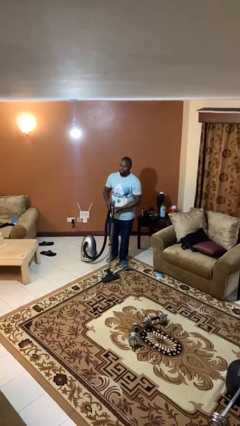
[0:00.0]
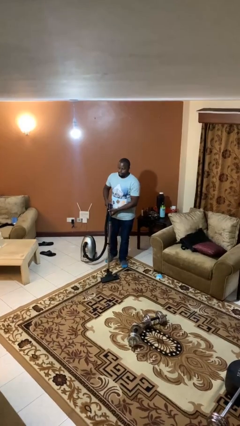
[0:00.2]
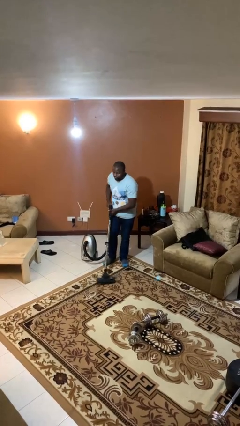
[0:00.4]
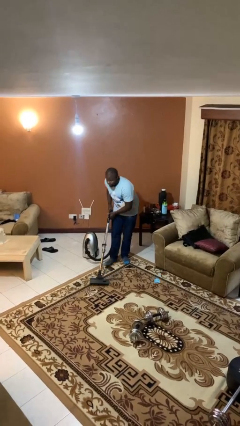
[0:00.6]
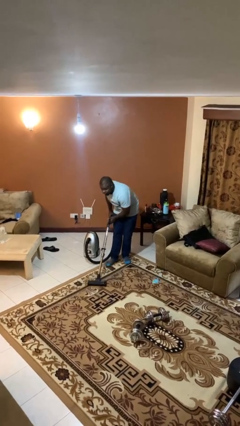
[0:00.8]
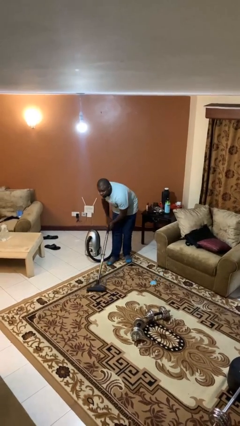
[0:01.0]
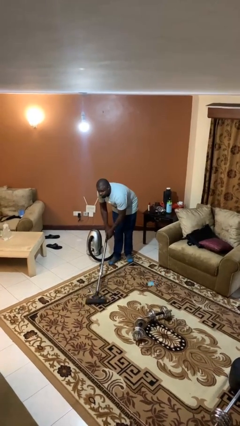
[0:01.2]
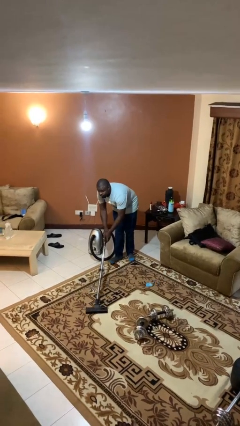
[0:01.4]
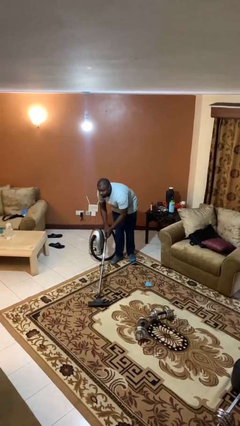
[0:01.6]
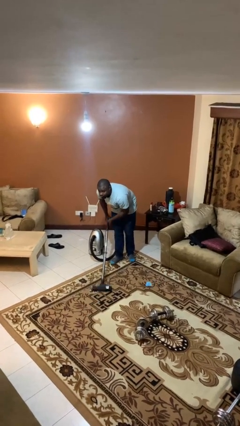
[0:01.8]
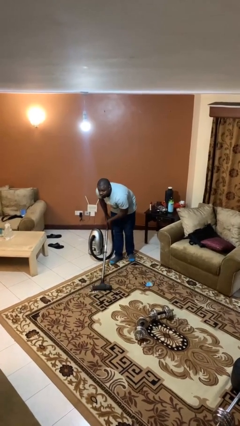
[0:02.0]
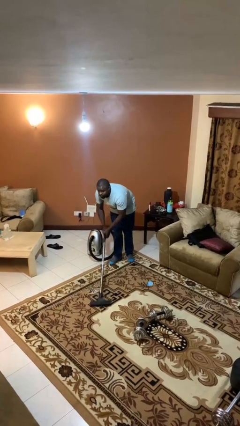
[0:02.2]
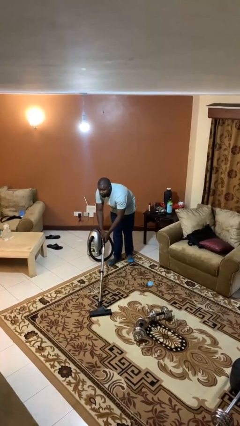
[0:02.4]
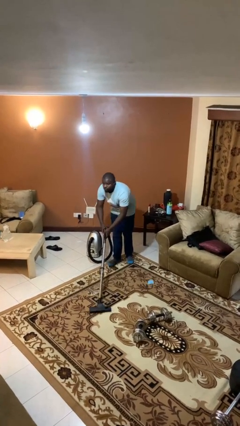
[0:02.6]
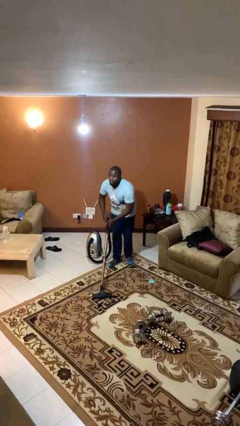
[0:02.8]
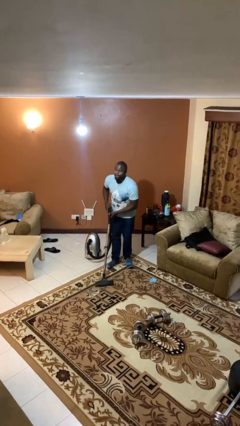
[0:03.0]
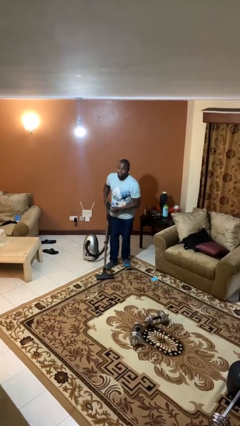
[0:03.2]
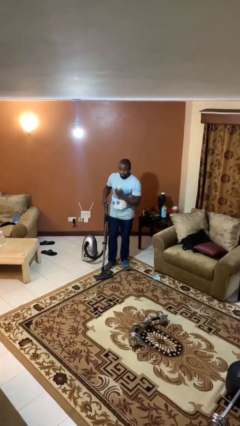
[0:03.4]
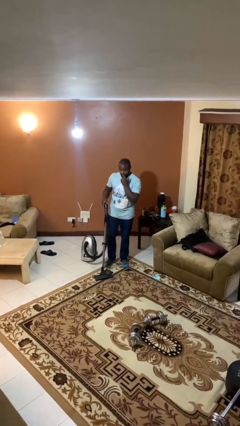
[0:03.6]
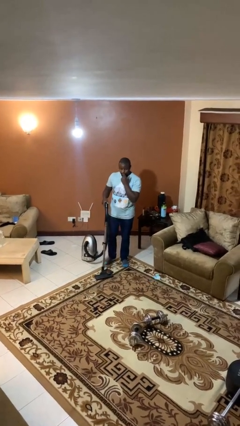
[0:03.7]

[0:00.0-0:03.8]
person vacuums carpet

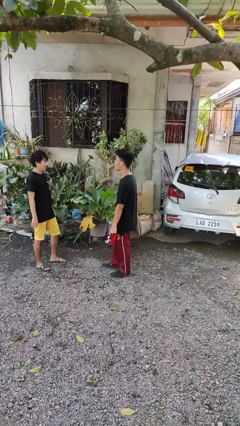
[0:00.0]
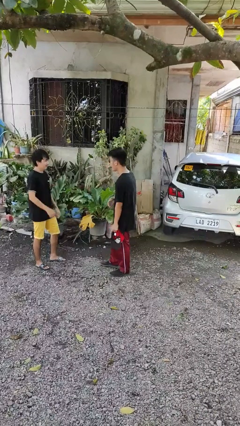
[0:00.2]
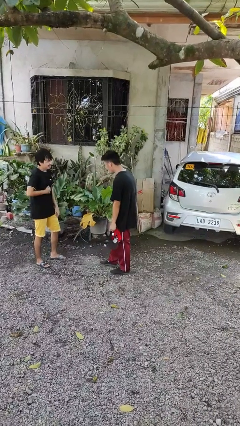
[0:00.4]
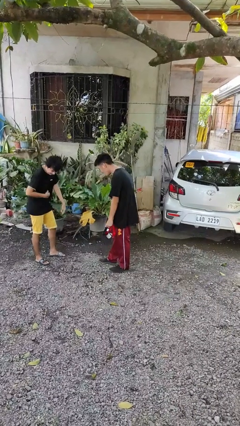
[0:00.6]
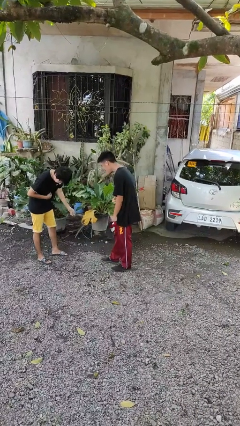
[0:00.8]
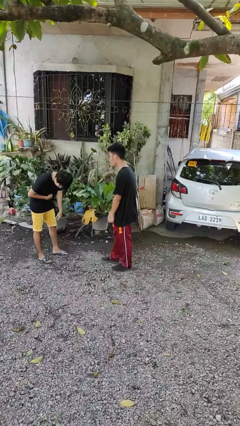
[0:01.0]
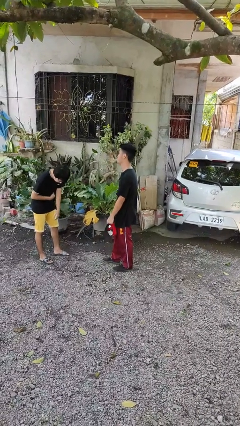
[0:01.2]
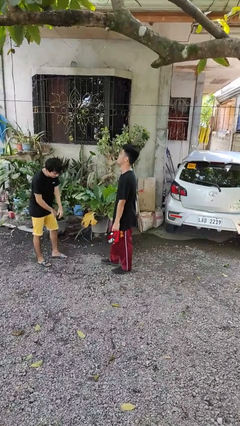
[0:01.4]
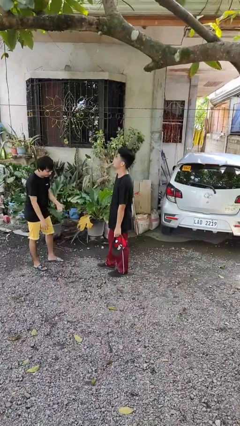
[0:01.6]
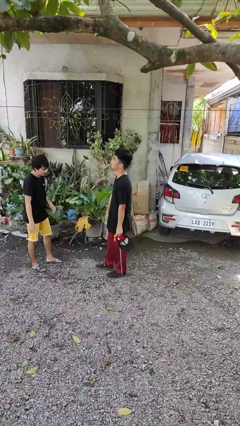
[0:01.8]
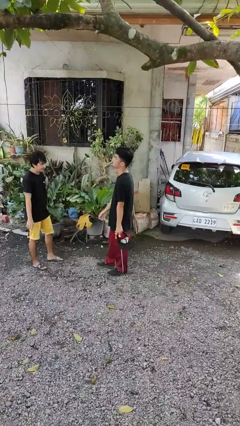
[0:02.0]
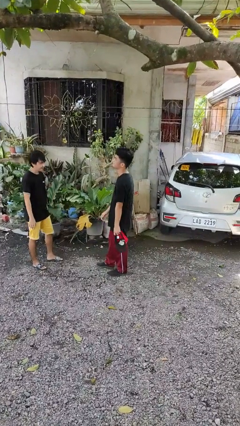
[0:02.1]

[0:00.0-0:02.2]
person laughs with person

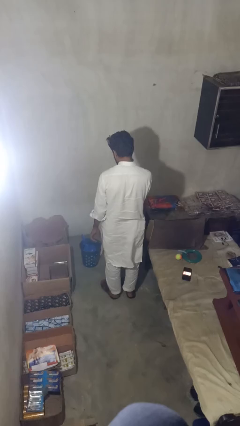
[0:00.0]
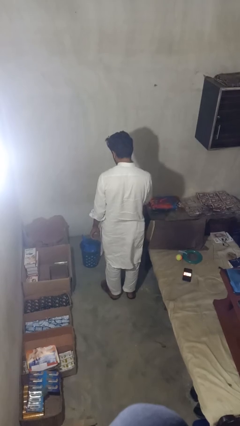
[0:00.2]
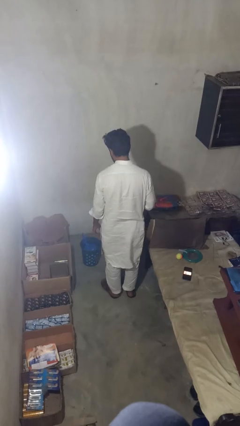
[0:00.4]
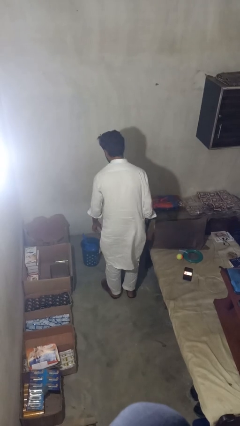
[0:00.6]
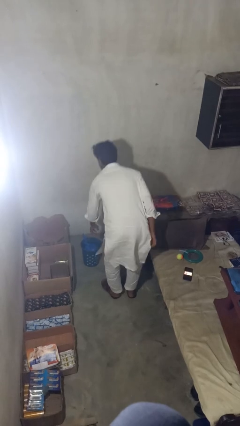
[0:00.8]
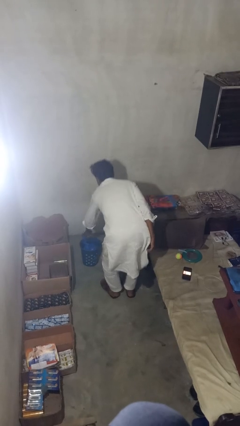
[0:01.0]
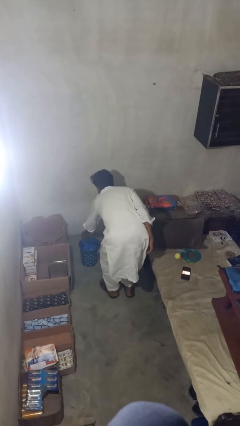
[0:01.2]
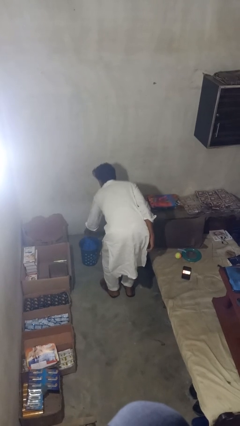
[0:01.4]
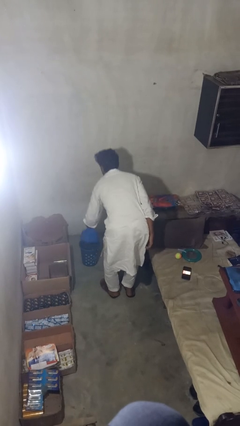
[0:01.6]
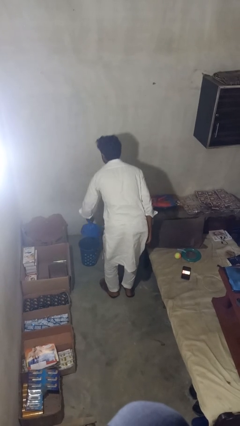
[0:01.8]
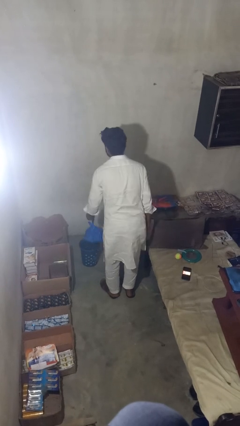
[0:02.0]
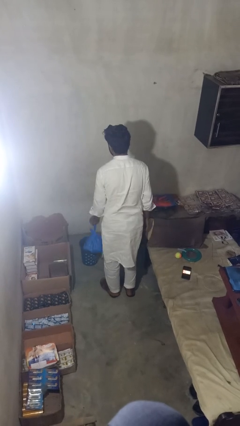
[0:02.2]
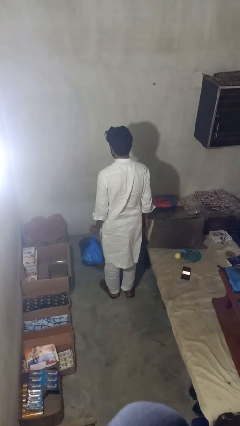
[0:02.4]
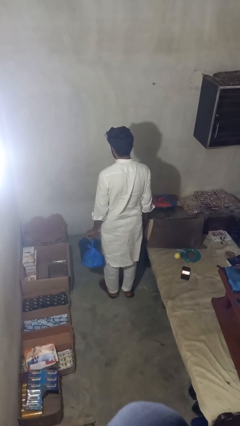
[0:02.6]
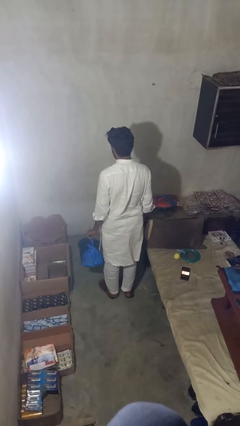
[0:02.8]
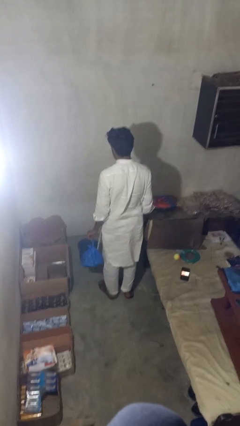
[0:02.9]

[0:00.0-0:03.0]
person takes object from basket

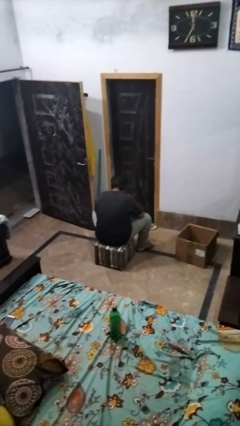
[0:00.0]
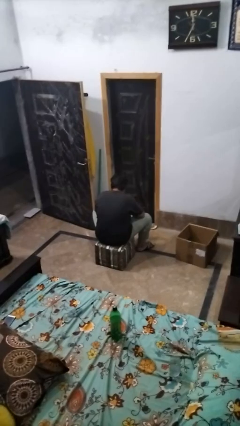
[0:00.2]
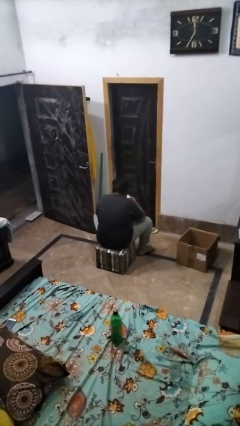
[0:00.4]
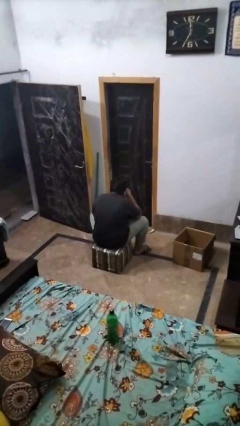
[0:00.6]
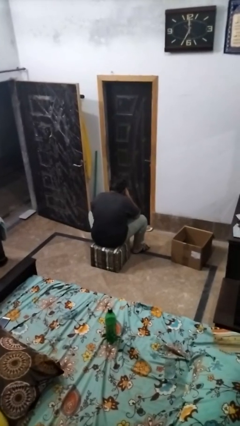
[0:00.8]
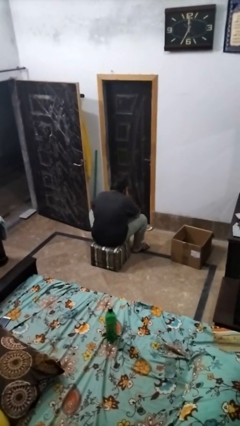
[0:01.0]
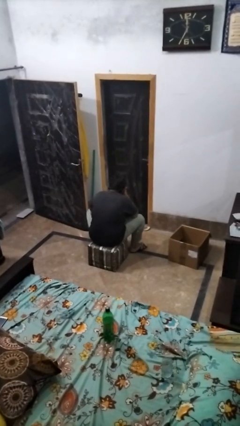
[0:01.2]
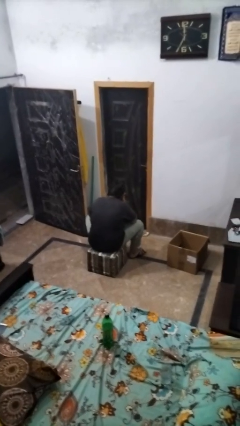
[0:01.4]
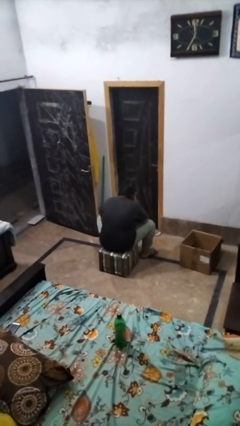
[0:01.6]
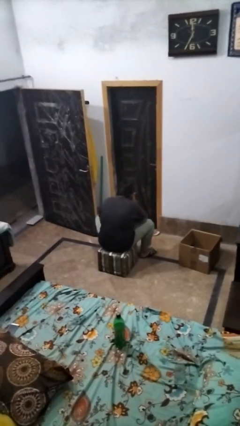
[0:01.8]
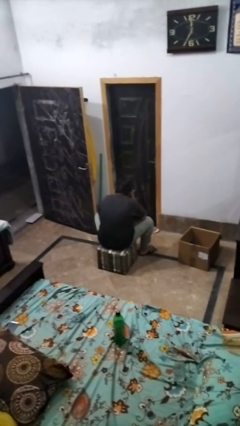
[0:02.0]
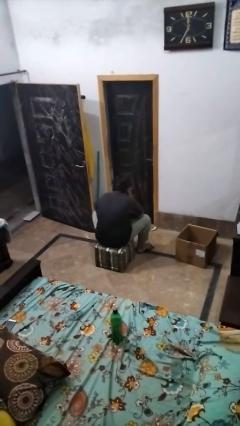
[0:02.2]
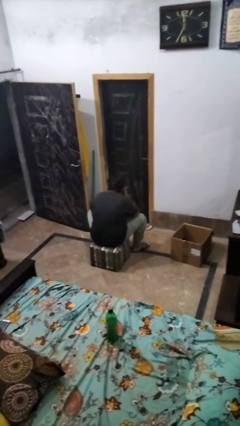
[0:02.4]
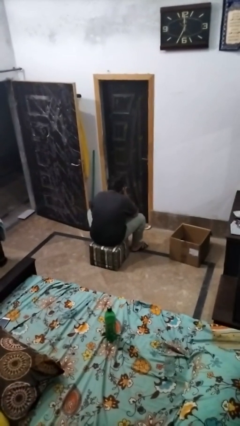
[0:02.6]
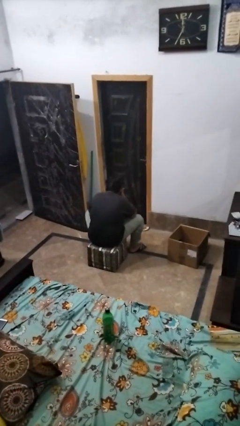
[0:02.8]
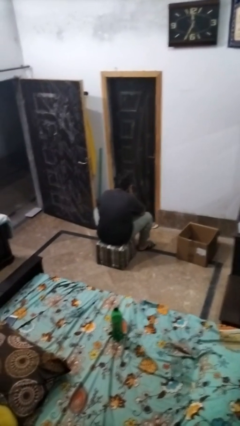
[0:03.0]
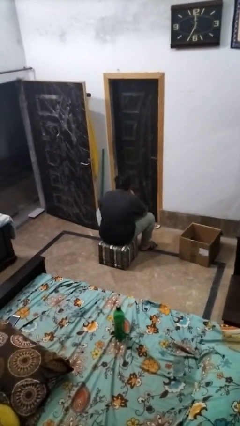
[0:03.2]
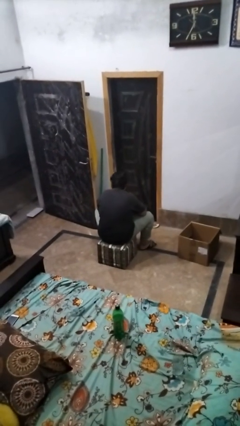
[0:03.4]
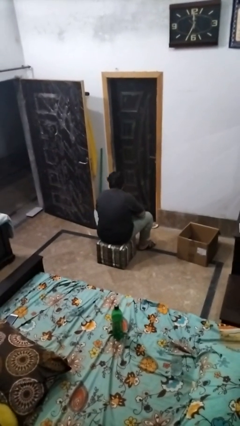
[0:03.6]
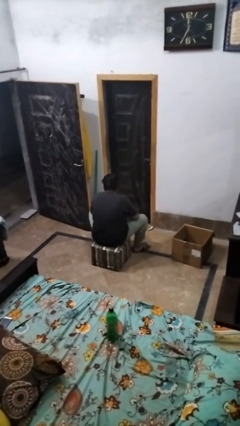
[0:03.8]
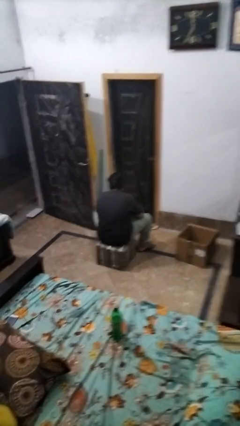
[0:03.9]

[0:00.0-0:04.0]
person blows nose

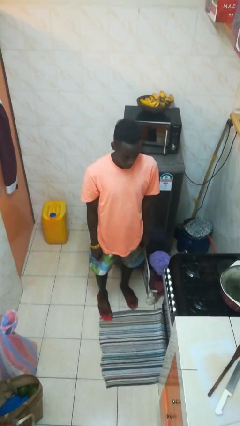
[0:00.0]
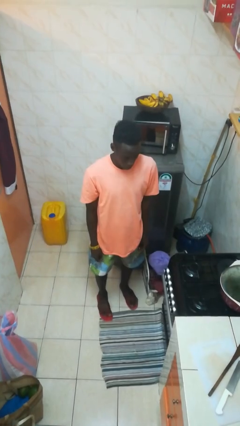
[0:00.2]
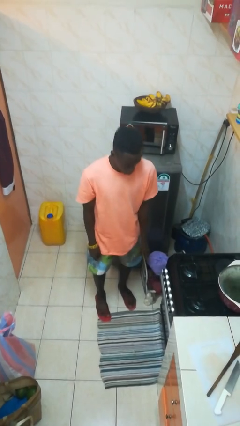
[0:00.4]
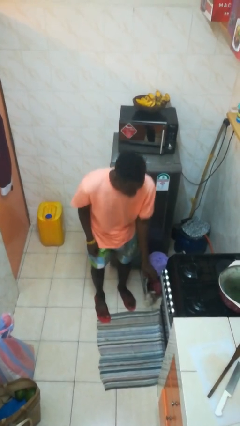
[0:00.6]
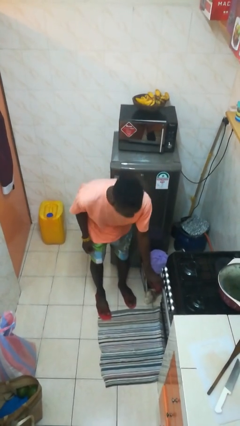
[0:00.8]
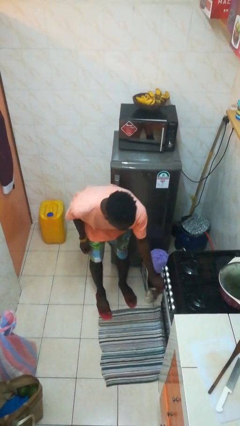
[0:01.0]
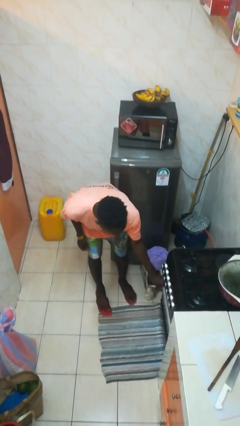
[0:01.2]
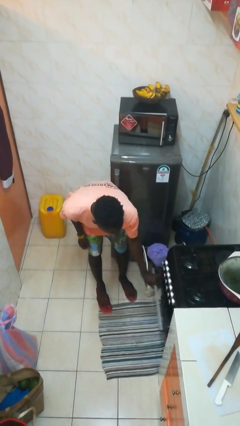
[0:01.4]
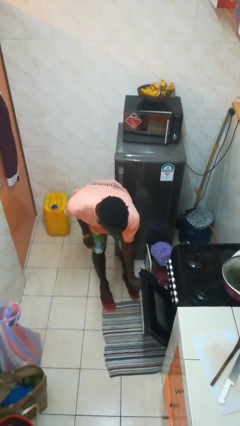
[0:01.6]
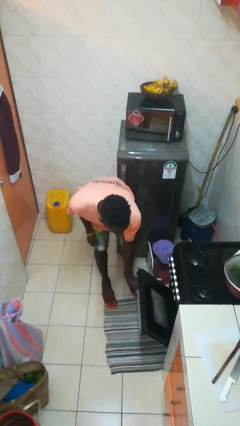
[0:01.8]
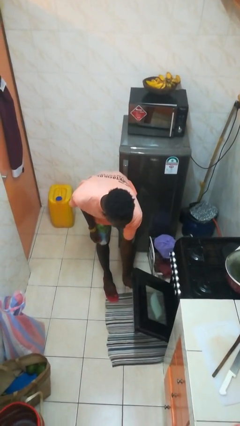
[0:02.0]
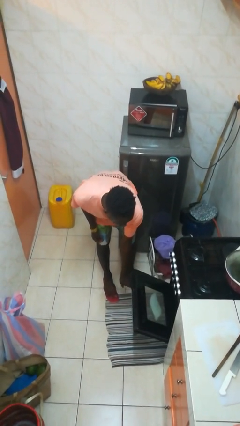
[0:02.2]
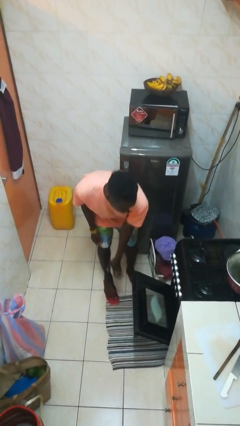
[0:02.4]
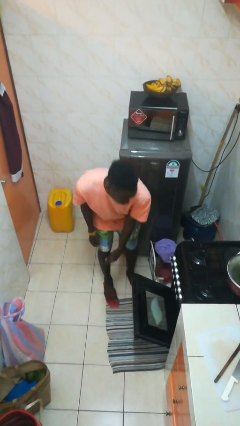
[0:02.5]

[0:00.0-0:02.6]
person opens oven door

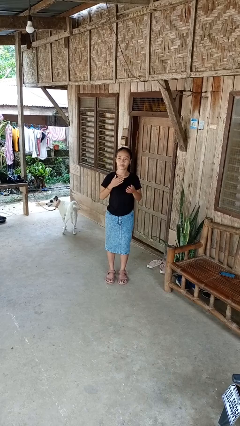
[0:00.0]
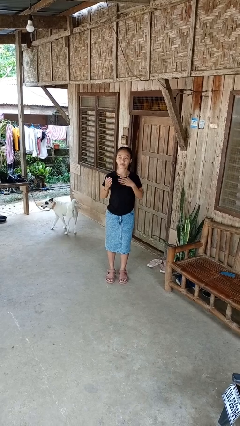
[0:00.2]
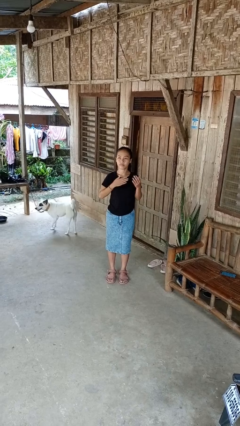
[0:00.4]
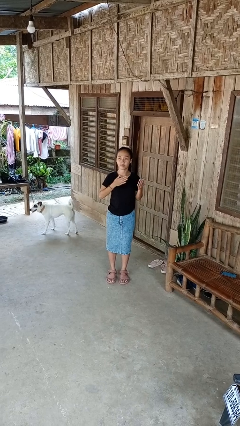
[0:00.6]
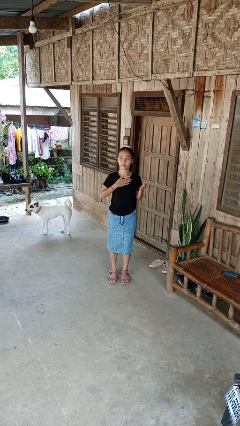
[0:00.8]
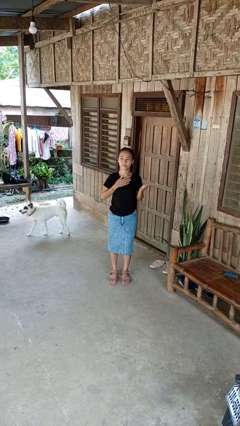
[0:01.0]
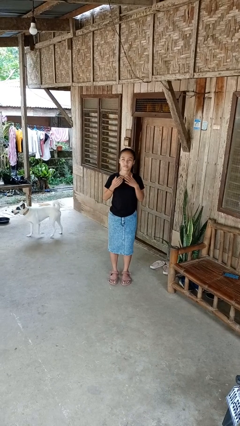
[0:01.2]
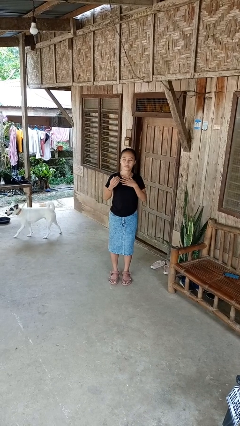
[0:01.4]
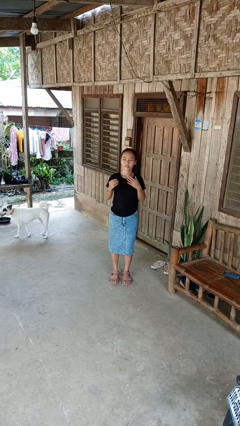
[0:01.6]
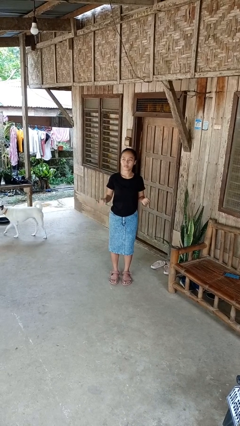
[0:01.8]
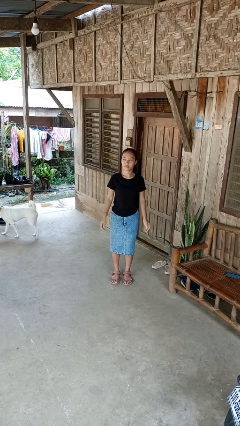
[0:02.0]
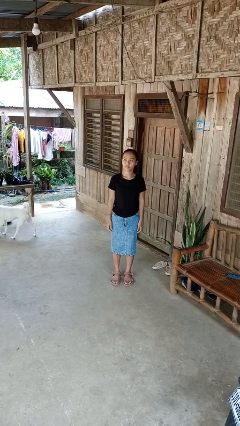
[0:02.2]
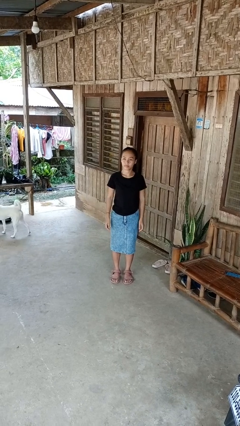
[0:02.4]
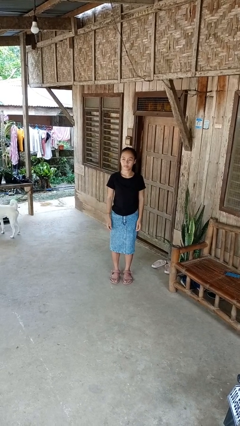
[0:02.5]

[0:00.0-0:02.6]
person drums on chest
